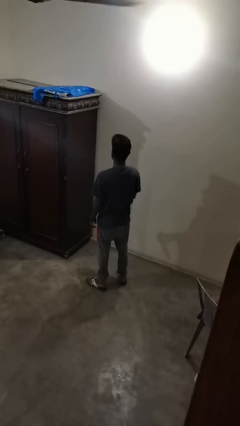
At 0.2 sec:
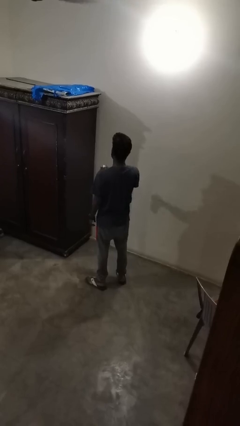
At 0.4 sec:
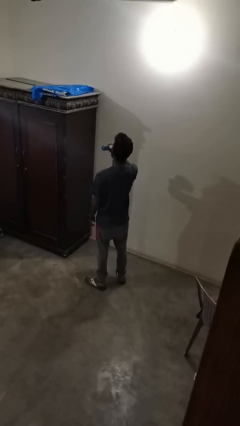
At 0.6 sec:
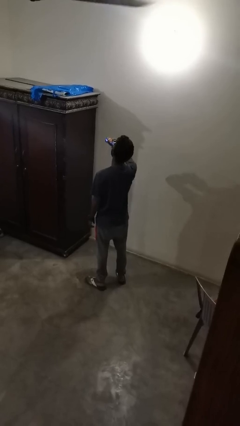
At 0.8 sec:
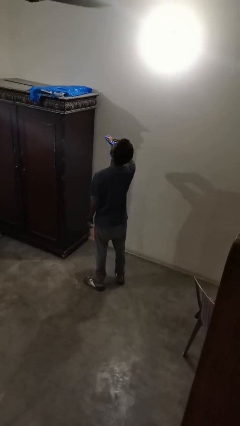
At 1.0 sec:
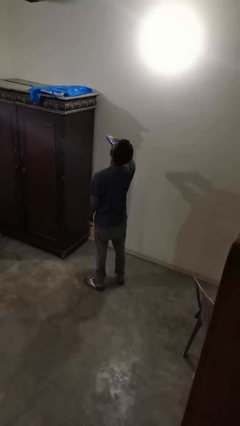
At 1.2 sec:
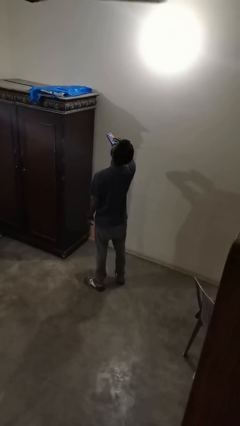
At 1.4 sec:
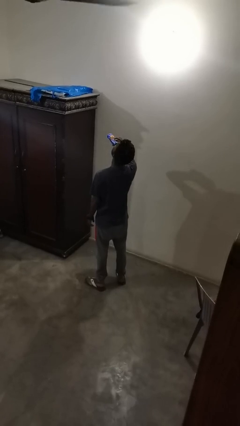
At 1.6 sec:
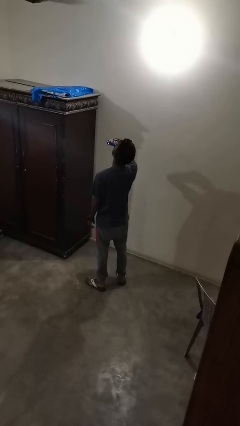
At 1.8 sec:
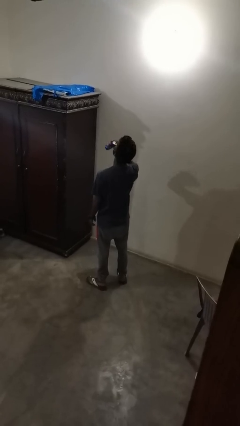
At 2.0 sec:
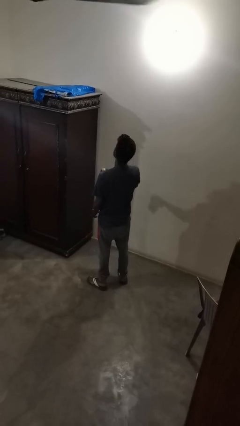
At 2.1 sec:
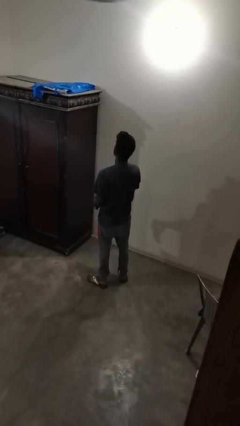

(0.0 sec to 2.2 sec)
person drinks from beverage can

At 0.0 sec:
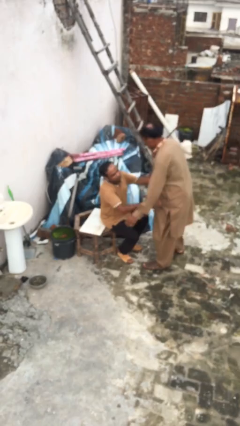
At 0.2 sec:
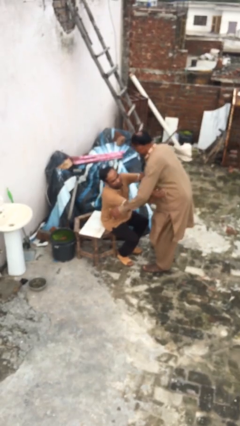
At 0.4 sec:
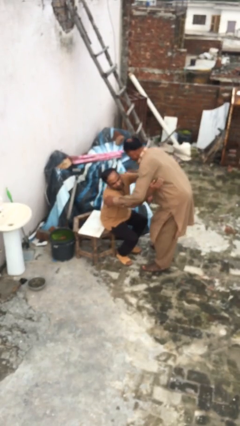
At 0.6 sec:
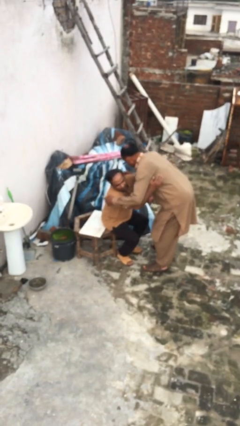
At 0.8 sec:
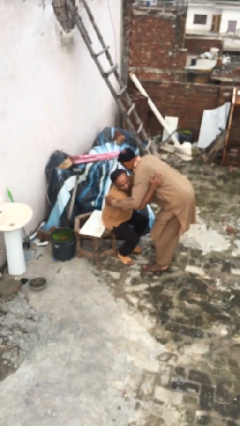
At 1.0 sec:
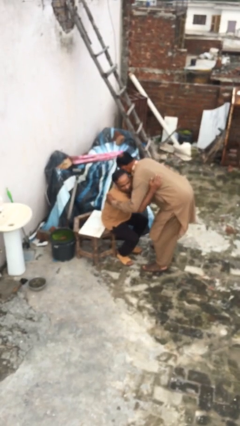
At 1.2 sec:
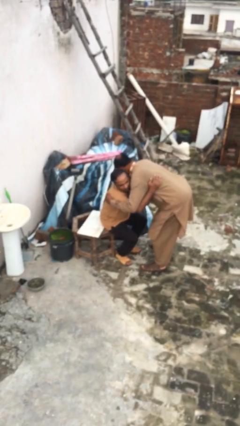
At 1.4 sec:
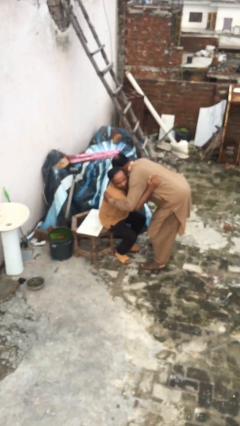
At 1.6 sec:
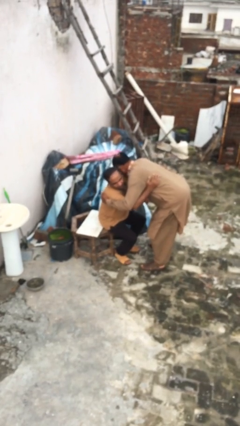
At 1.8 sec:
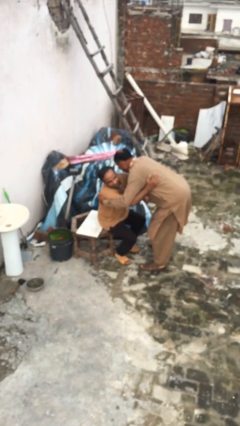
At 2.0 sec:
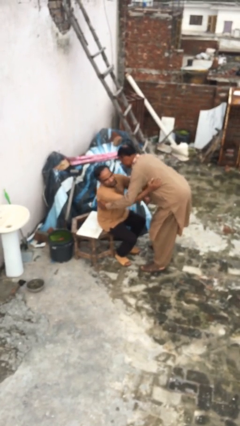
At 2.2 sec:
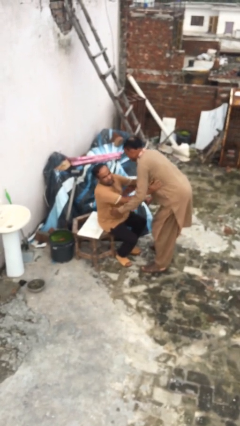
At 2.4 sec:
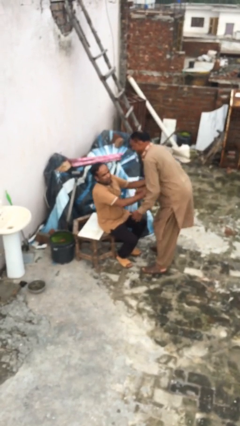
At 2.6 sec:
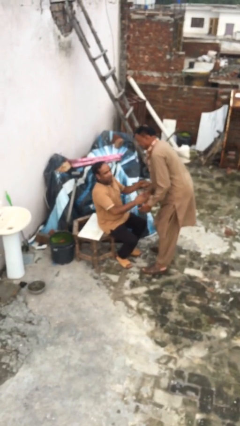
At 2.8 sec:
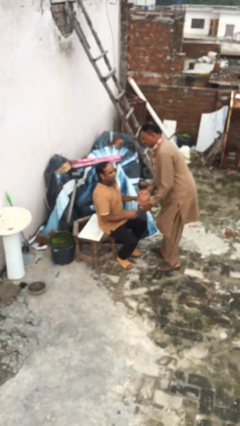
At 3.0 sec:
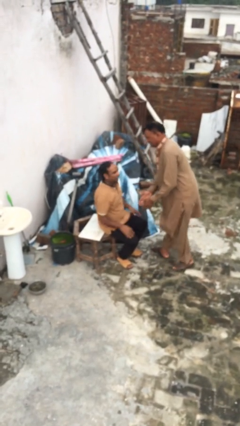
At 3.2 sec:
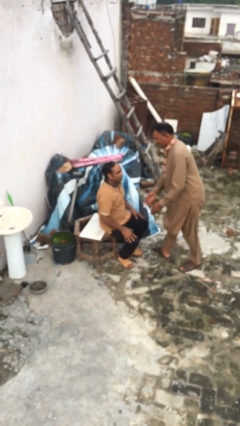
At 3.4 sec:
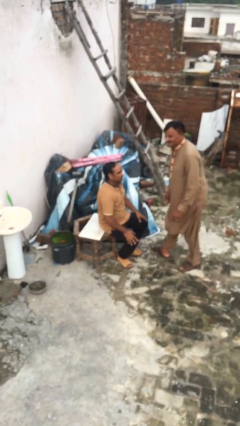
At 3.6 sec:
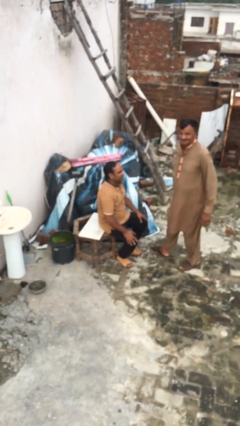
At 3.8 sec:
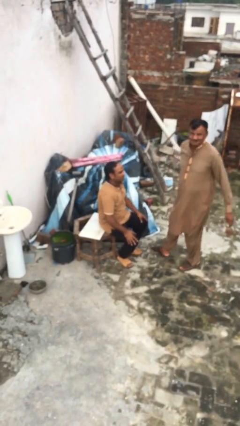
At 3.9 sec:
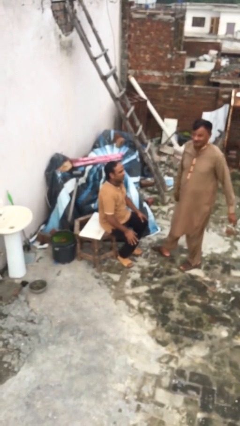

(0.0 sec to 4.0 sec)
person embraces person

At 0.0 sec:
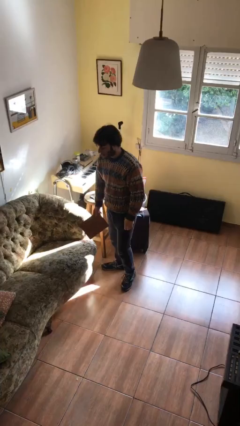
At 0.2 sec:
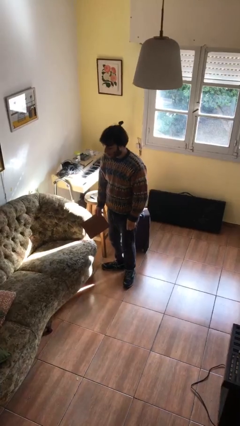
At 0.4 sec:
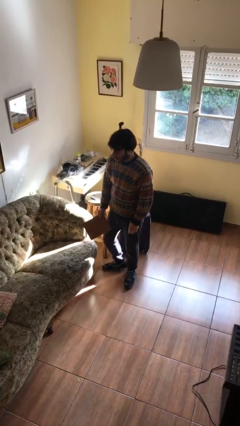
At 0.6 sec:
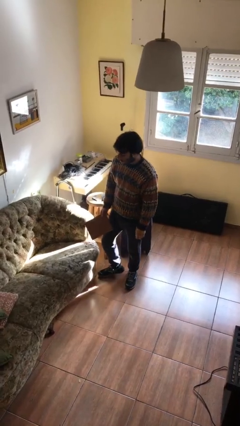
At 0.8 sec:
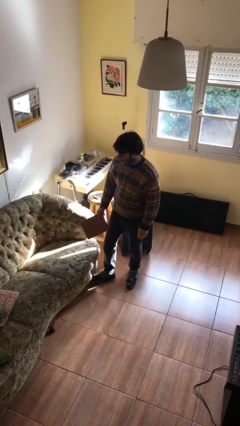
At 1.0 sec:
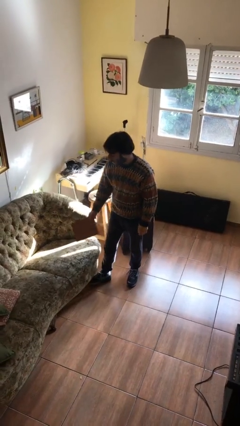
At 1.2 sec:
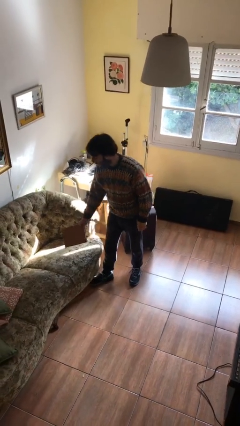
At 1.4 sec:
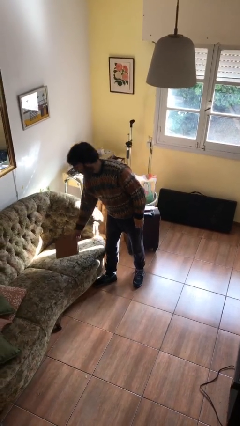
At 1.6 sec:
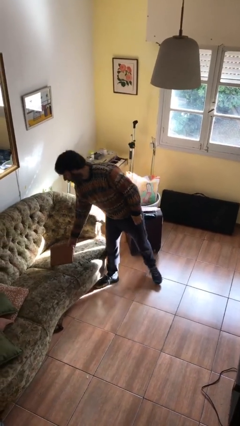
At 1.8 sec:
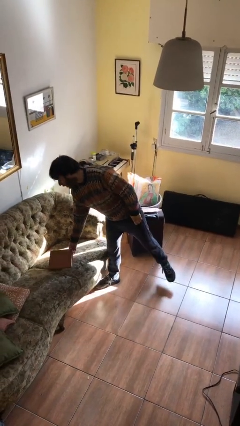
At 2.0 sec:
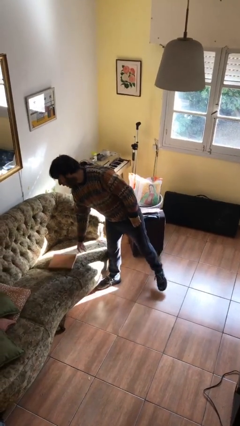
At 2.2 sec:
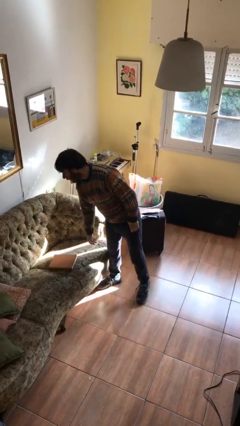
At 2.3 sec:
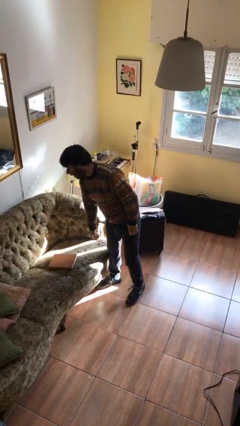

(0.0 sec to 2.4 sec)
person puts down object on couch

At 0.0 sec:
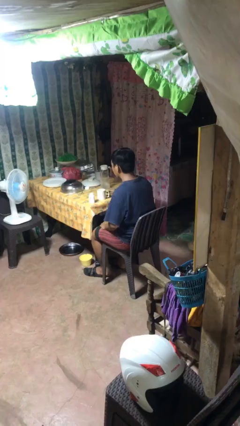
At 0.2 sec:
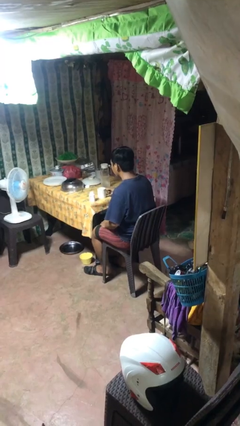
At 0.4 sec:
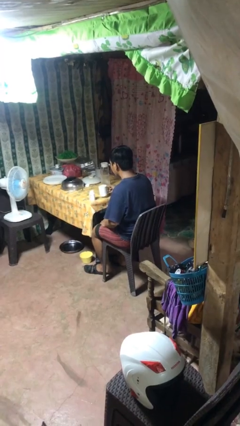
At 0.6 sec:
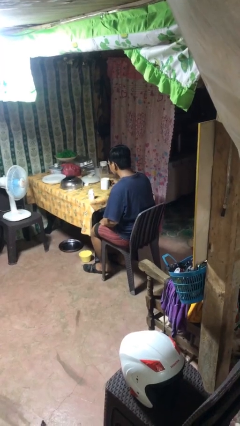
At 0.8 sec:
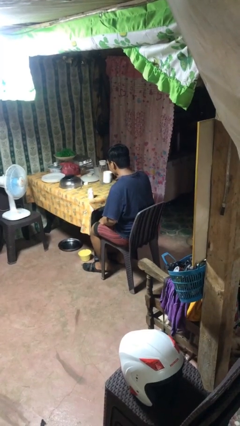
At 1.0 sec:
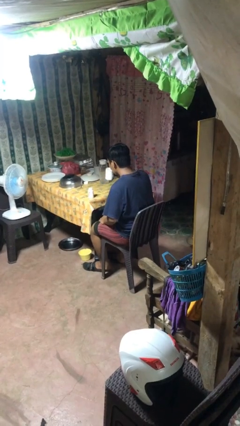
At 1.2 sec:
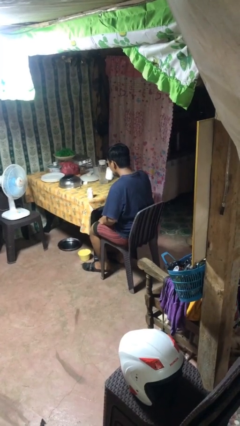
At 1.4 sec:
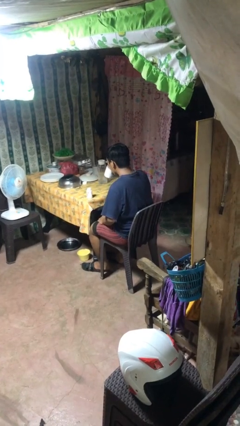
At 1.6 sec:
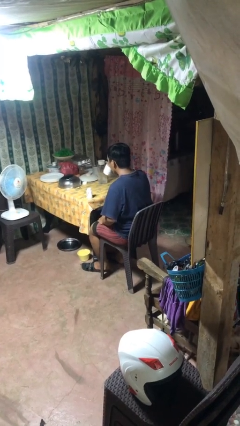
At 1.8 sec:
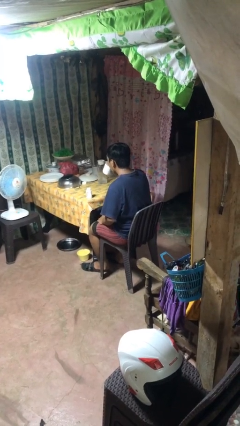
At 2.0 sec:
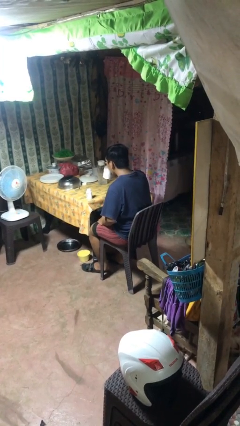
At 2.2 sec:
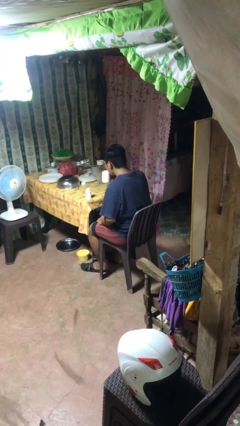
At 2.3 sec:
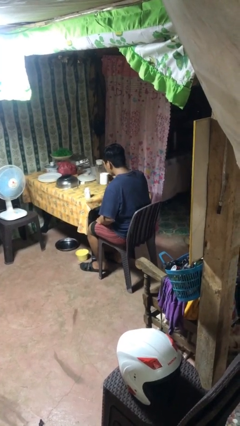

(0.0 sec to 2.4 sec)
person drinks from cup

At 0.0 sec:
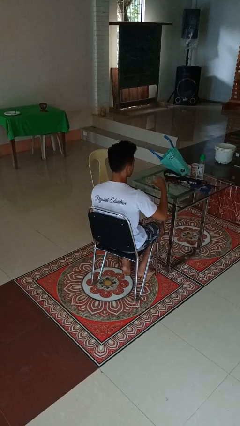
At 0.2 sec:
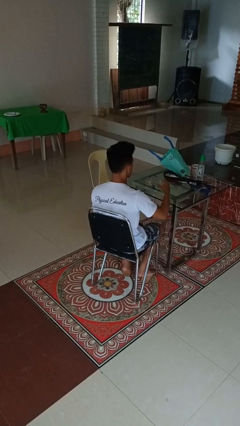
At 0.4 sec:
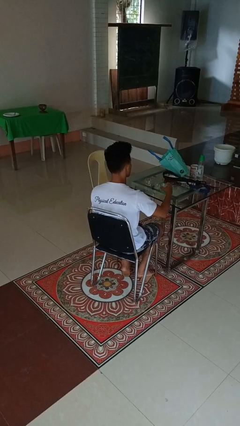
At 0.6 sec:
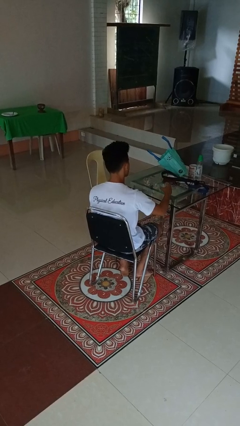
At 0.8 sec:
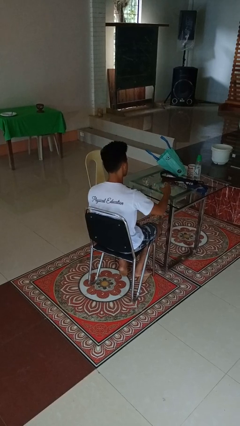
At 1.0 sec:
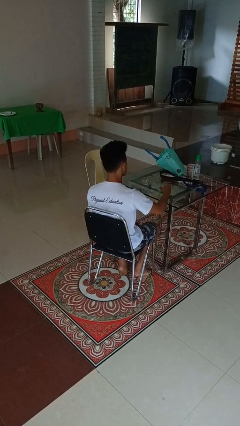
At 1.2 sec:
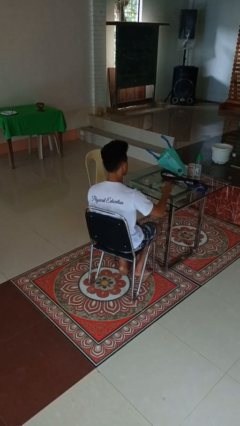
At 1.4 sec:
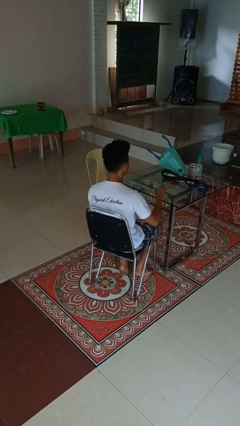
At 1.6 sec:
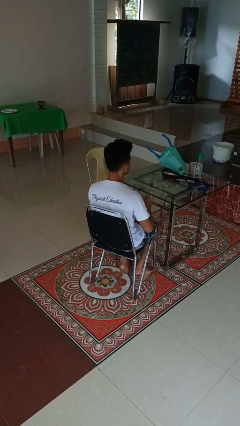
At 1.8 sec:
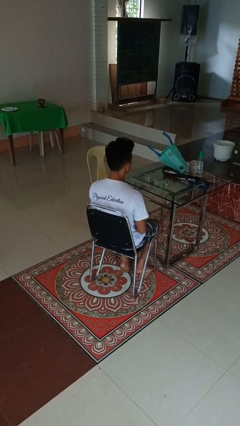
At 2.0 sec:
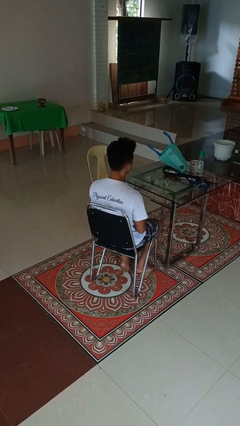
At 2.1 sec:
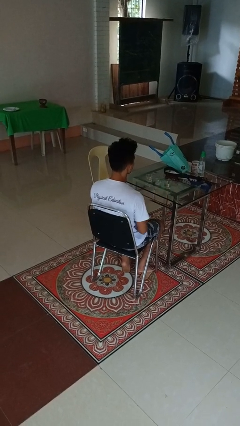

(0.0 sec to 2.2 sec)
person puts down object on table

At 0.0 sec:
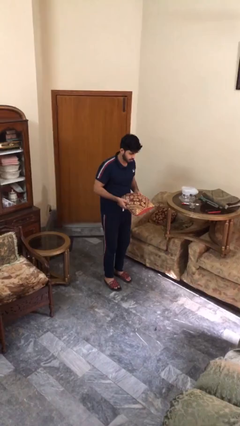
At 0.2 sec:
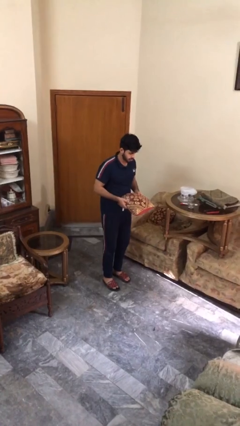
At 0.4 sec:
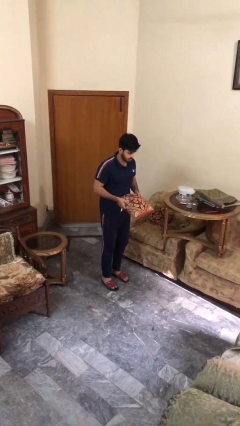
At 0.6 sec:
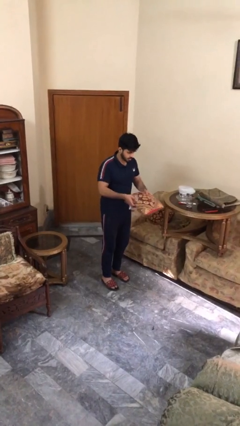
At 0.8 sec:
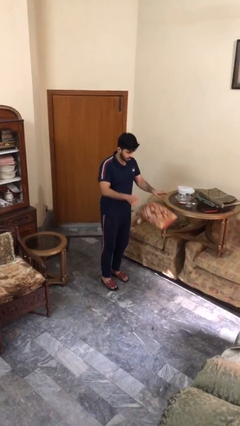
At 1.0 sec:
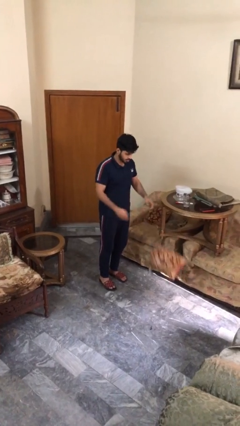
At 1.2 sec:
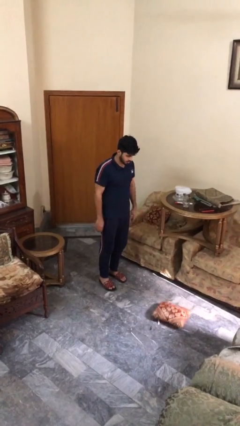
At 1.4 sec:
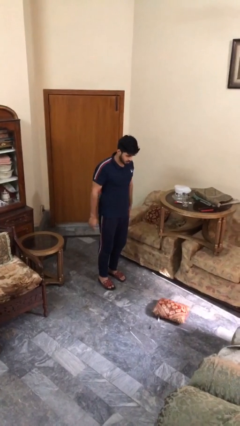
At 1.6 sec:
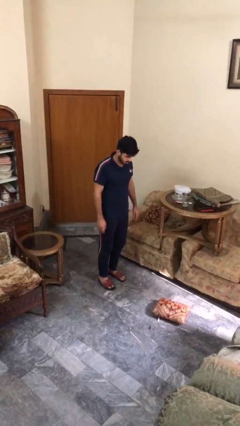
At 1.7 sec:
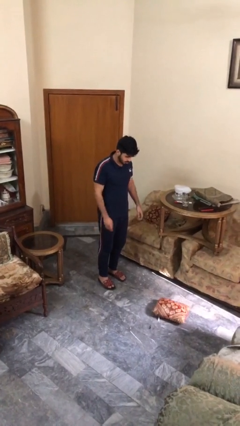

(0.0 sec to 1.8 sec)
person throws object to ground

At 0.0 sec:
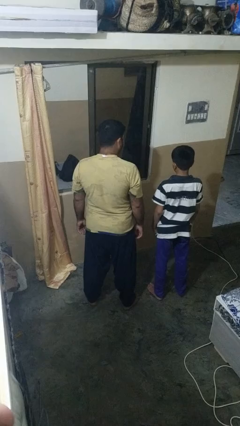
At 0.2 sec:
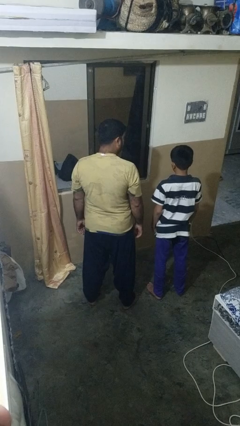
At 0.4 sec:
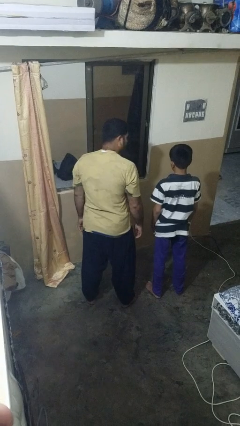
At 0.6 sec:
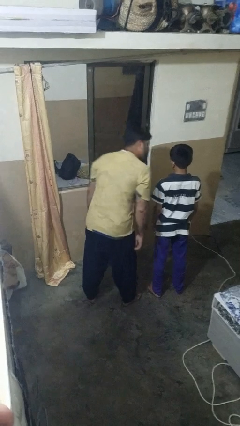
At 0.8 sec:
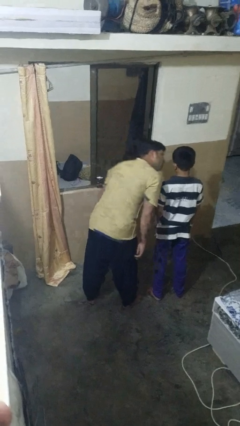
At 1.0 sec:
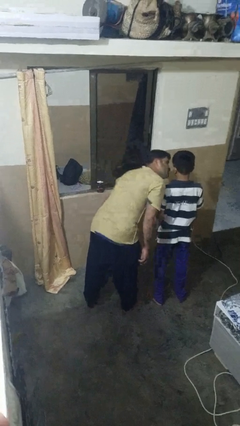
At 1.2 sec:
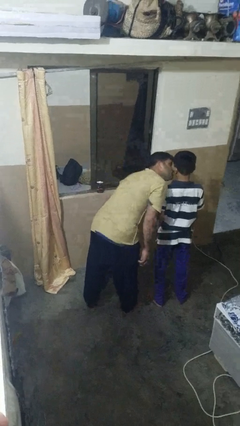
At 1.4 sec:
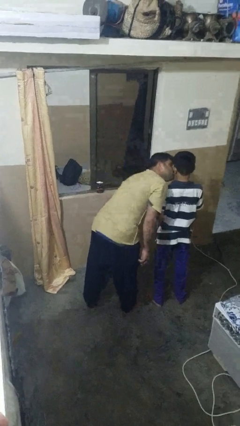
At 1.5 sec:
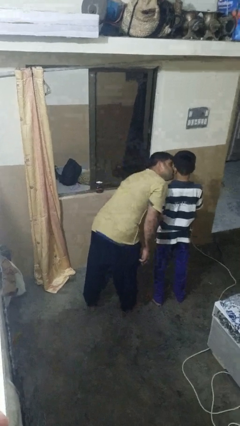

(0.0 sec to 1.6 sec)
person kisses cheek of person

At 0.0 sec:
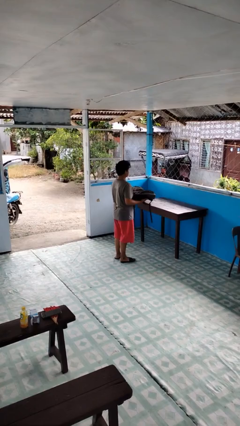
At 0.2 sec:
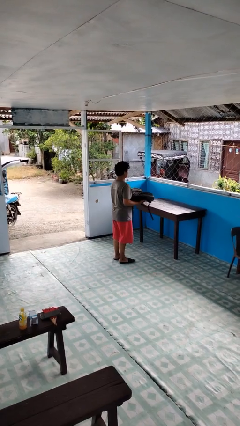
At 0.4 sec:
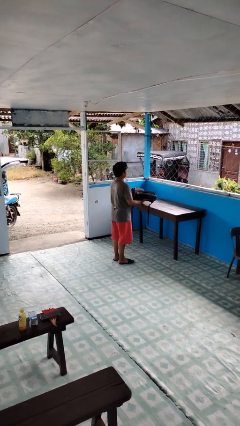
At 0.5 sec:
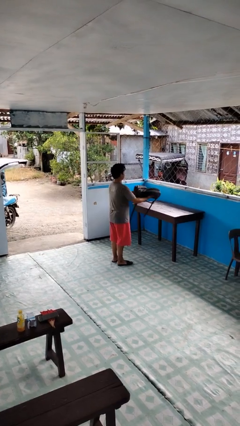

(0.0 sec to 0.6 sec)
person throws object on table
